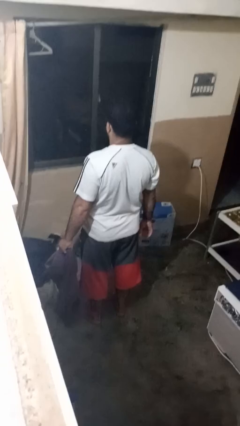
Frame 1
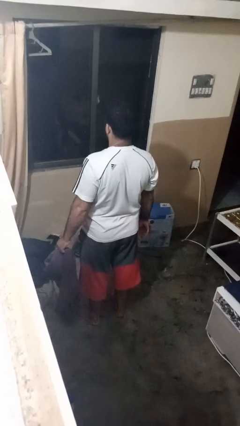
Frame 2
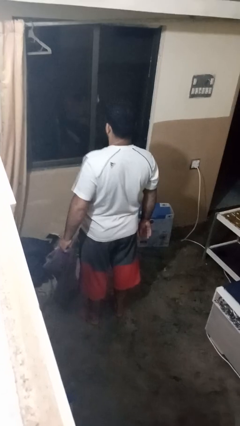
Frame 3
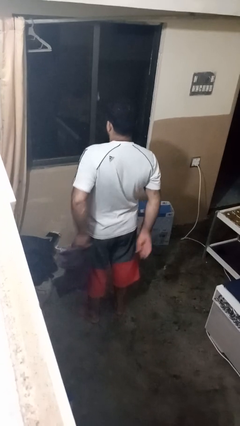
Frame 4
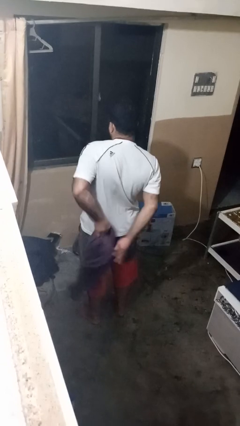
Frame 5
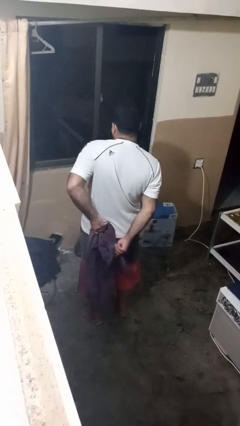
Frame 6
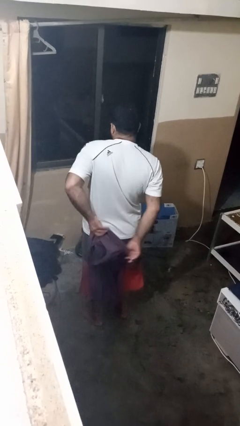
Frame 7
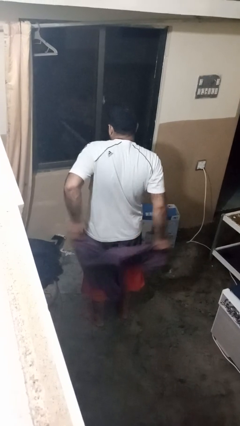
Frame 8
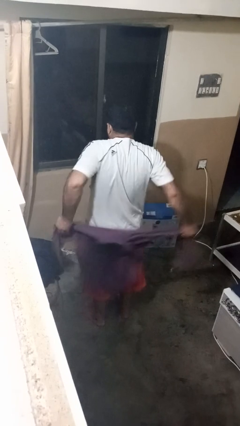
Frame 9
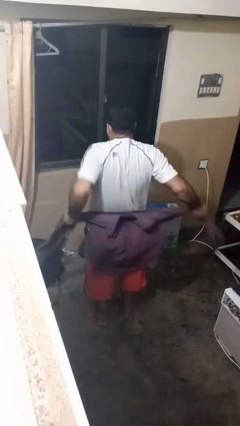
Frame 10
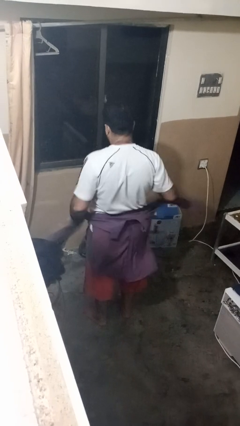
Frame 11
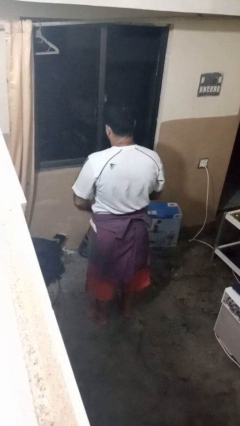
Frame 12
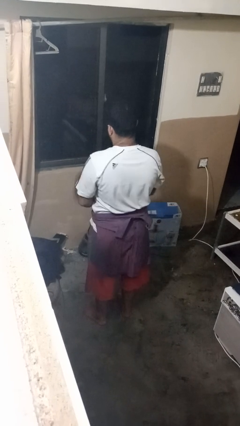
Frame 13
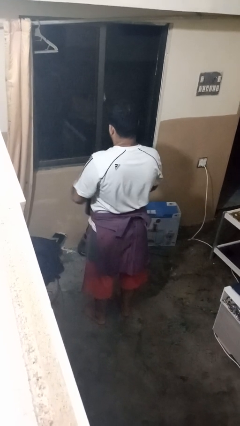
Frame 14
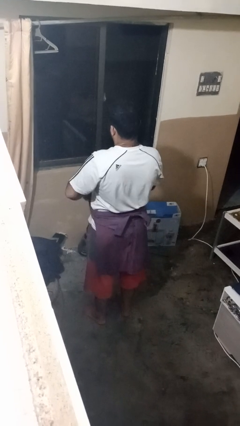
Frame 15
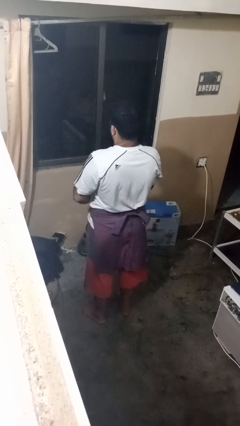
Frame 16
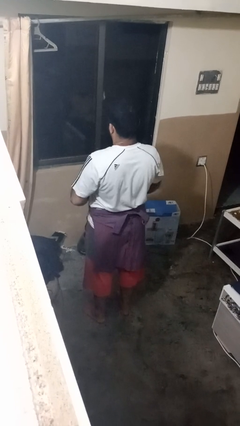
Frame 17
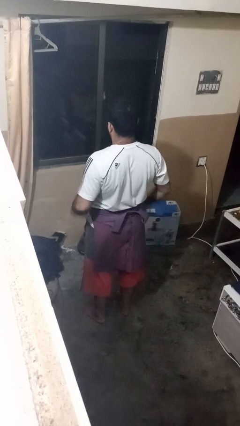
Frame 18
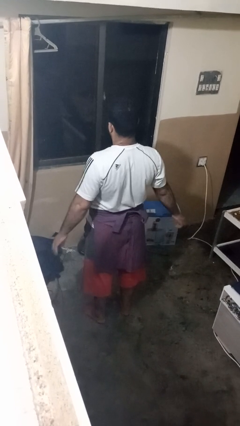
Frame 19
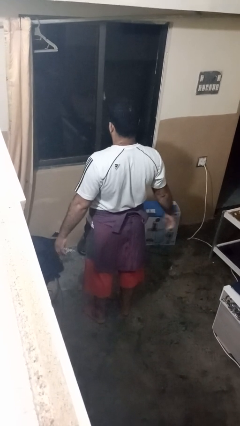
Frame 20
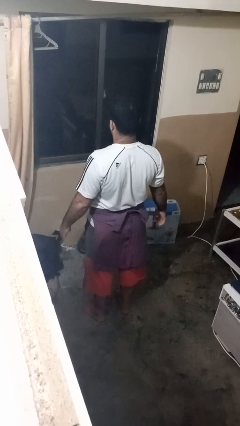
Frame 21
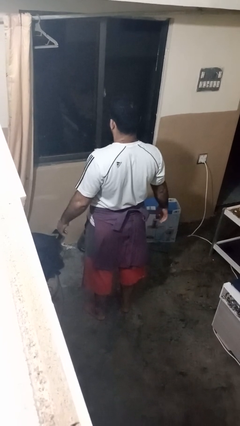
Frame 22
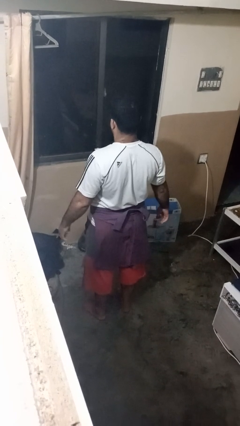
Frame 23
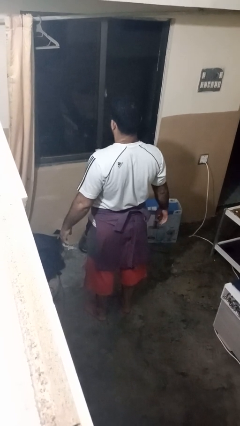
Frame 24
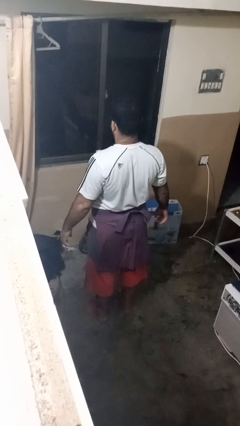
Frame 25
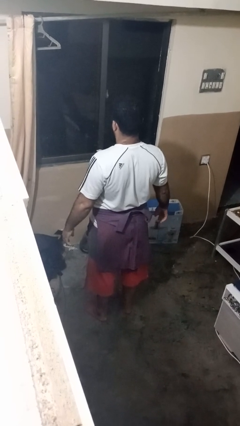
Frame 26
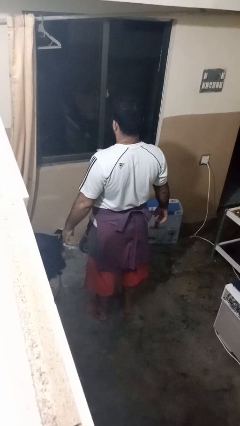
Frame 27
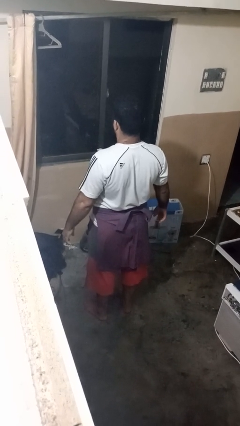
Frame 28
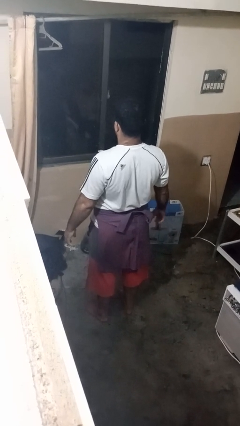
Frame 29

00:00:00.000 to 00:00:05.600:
person ties jacket around waist

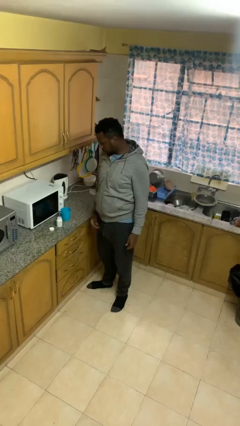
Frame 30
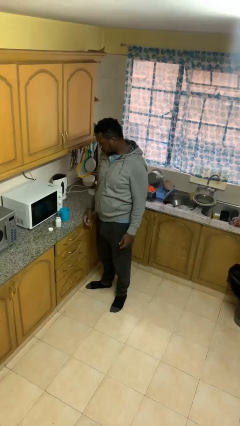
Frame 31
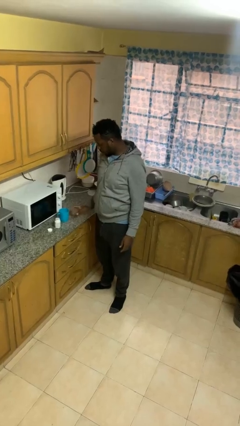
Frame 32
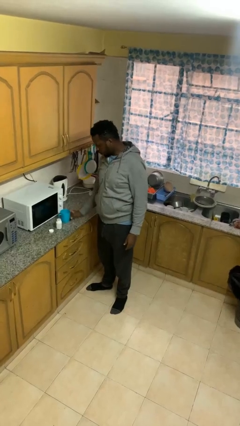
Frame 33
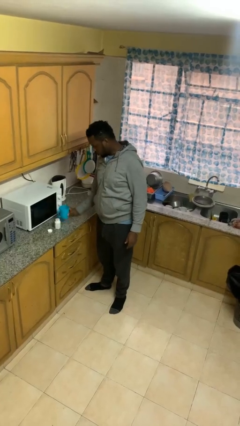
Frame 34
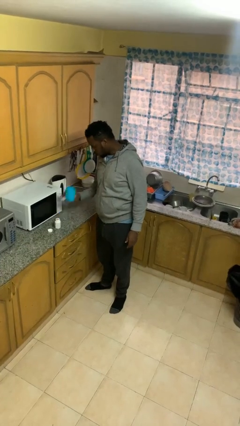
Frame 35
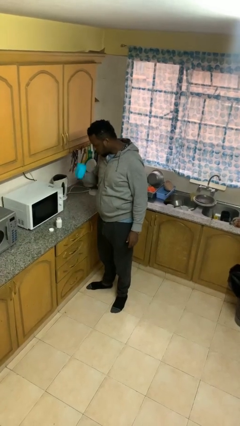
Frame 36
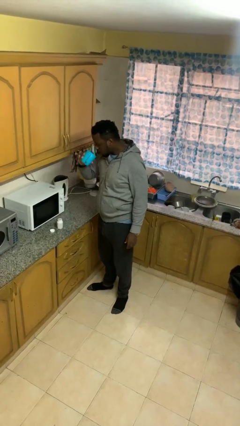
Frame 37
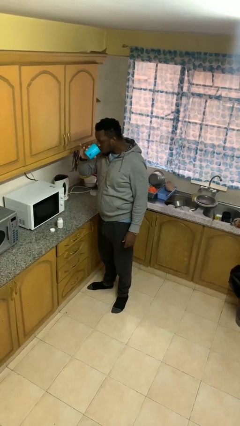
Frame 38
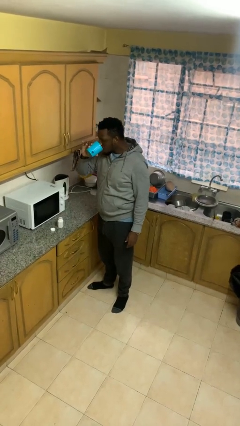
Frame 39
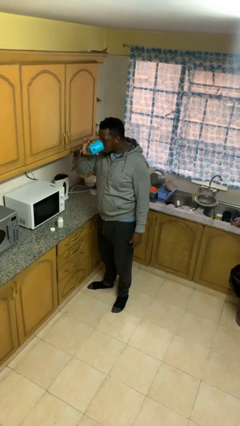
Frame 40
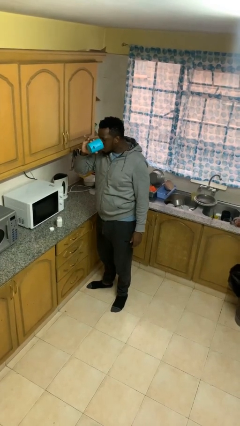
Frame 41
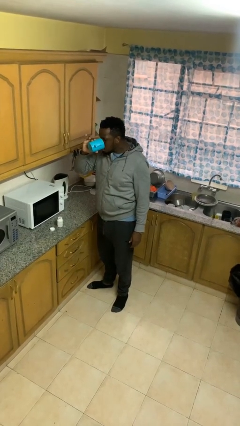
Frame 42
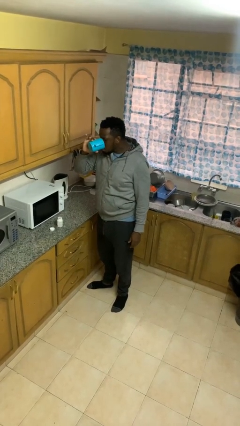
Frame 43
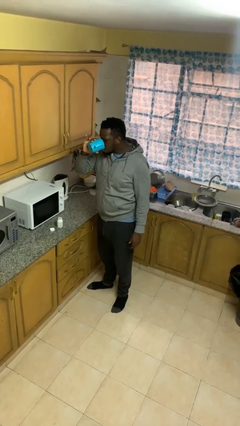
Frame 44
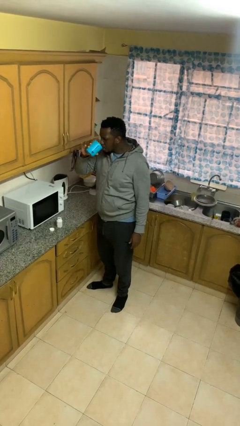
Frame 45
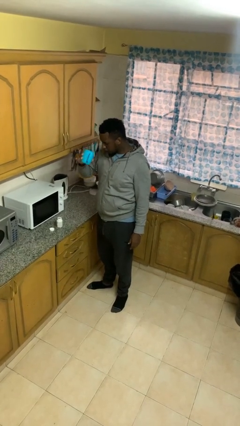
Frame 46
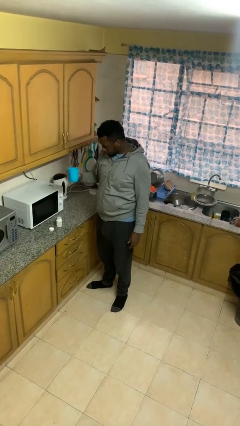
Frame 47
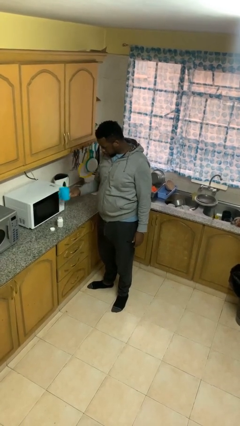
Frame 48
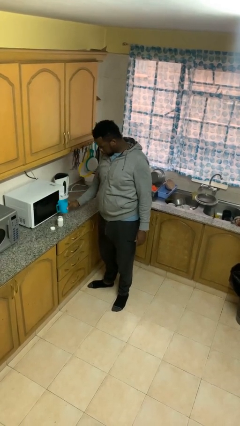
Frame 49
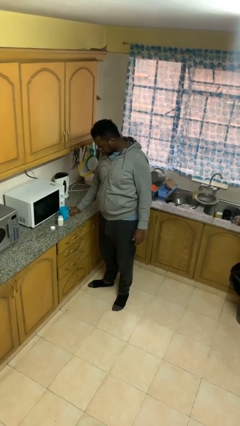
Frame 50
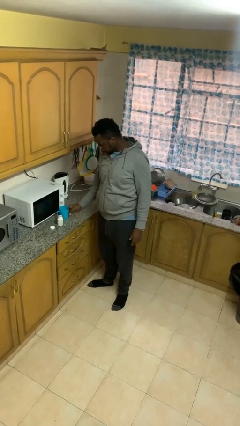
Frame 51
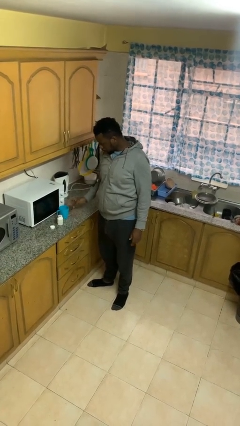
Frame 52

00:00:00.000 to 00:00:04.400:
person drinks from cup

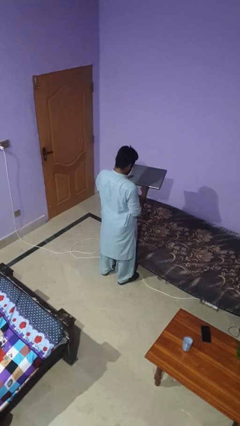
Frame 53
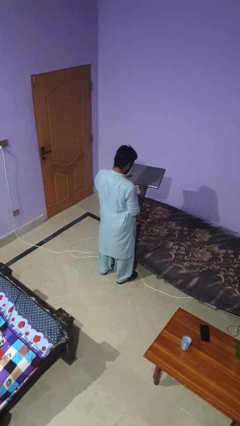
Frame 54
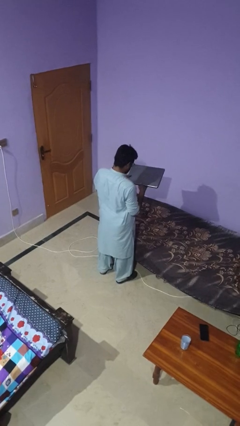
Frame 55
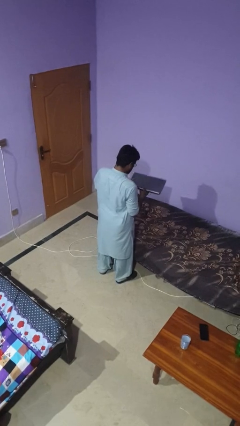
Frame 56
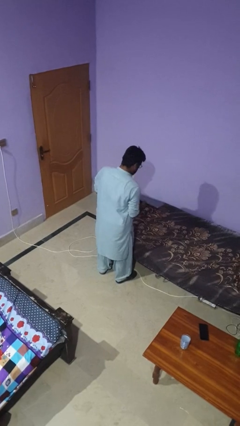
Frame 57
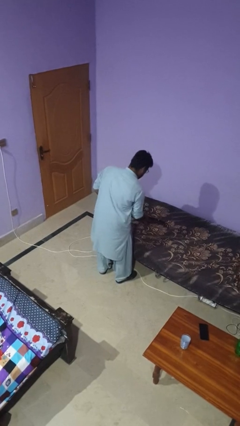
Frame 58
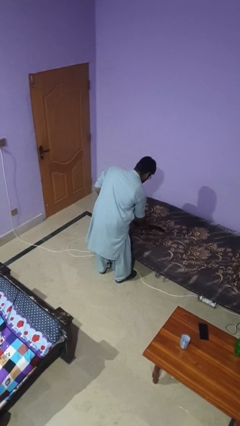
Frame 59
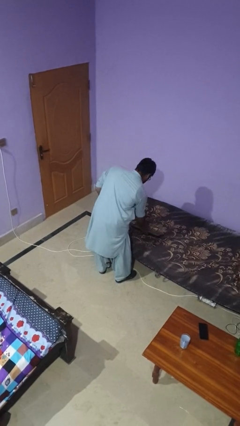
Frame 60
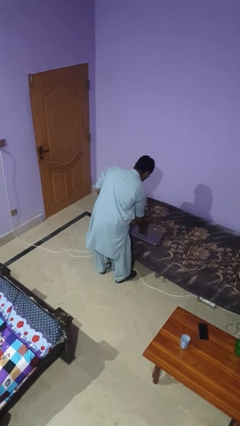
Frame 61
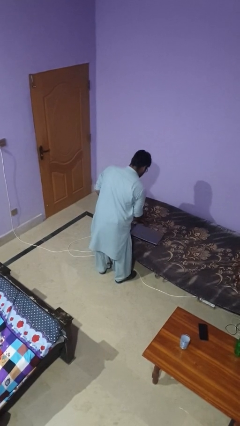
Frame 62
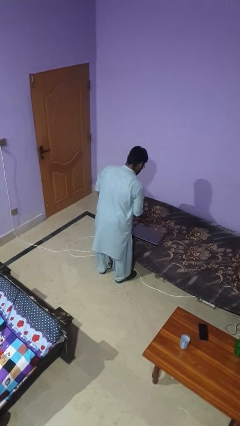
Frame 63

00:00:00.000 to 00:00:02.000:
person puts down object on bed

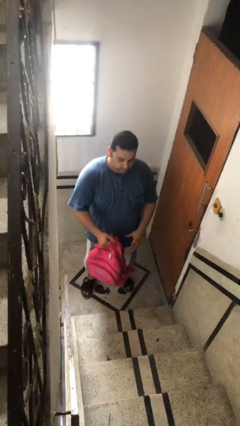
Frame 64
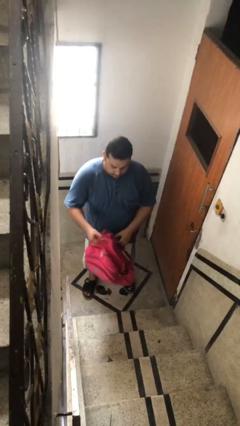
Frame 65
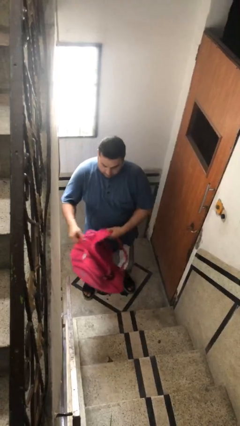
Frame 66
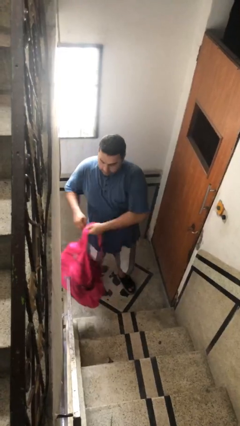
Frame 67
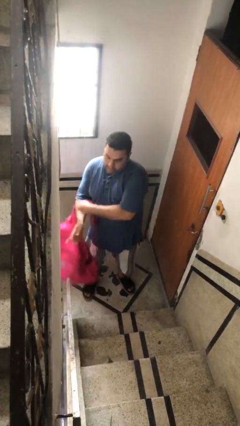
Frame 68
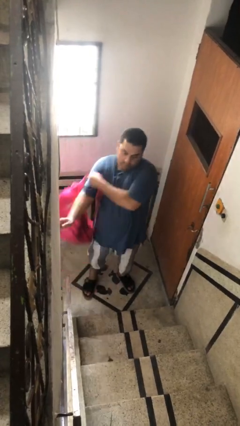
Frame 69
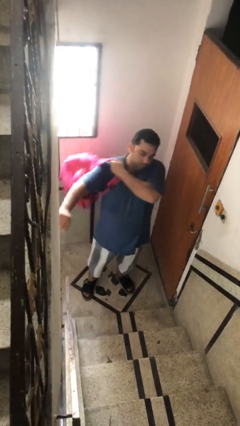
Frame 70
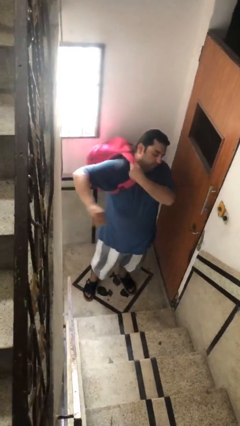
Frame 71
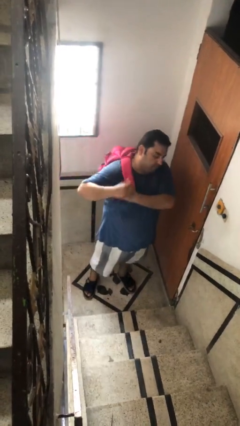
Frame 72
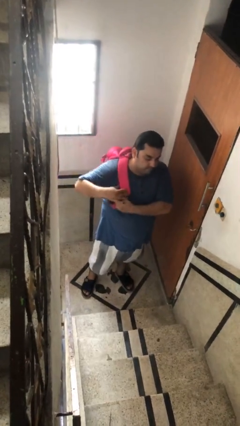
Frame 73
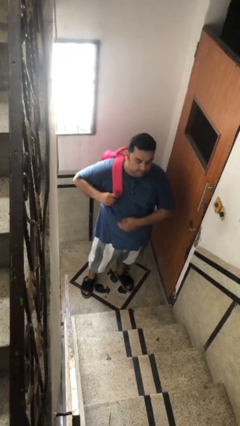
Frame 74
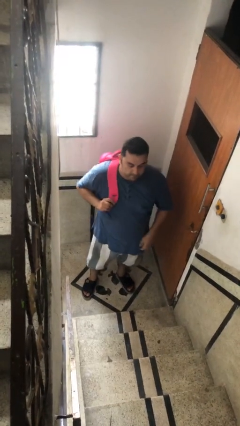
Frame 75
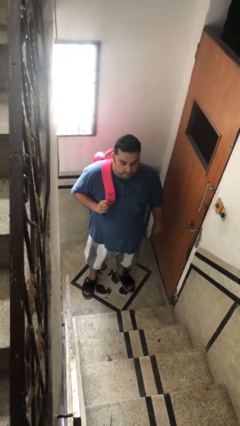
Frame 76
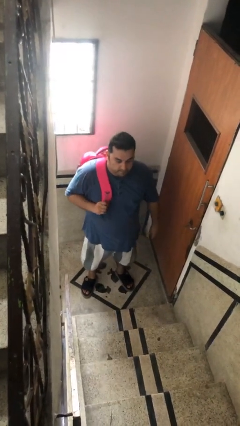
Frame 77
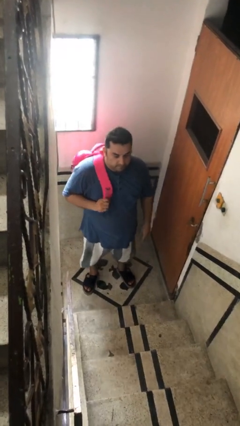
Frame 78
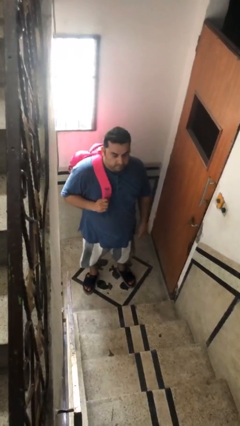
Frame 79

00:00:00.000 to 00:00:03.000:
person puts on backpack

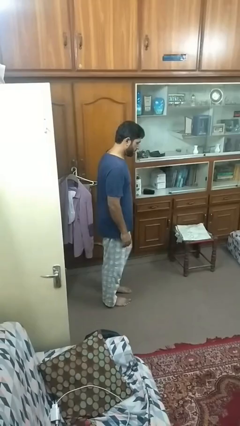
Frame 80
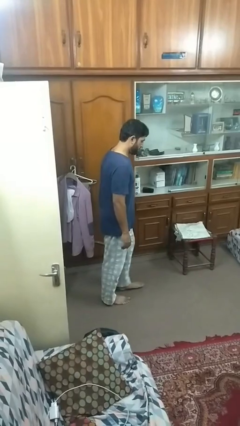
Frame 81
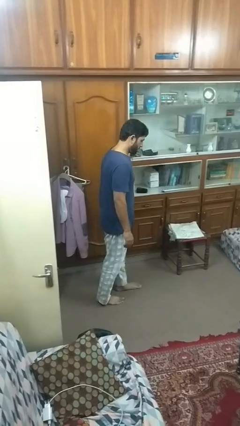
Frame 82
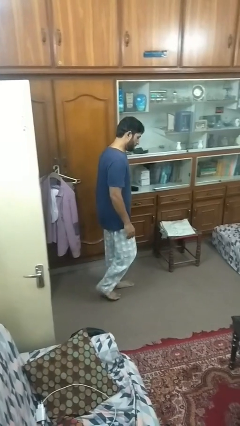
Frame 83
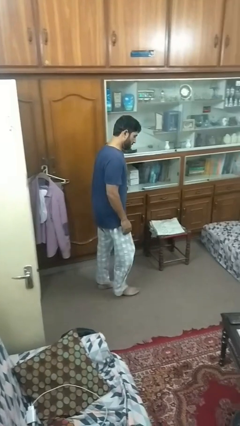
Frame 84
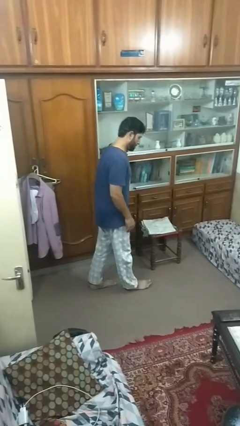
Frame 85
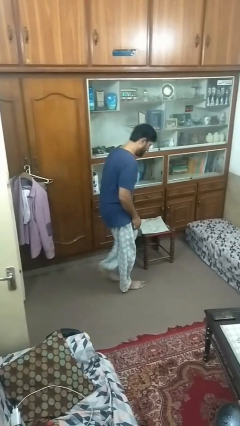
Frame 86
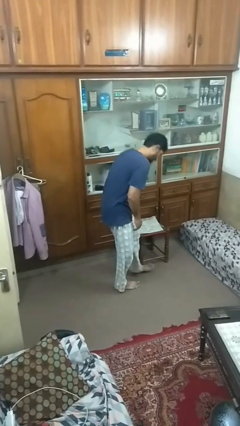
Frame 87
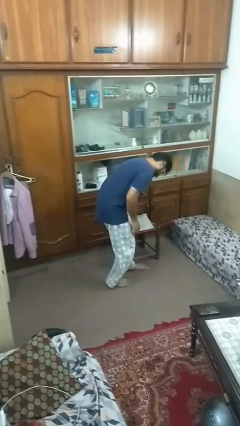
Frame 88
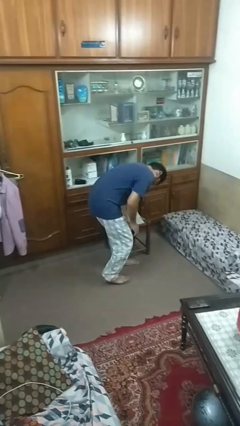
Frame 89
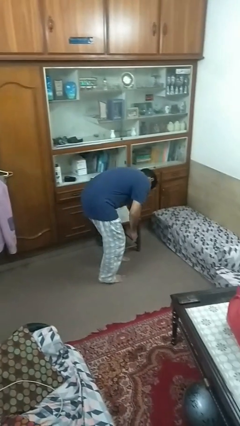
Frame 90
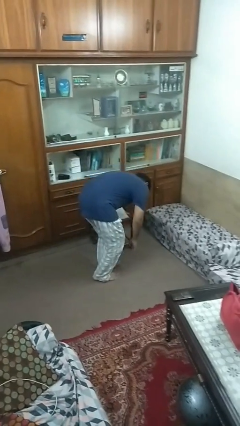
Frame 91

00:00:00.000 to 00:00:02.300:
person trips on object on floor

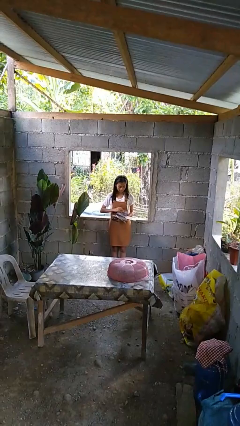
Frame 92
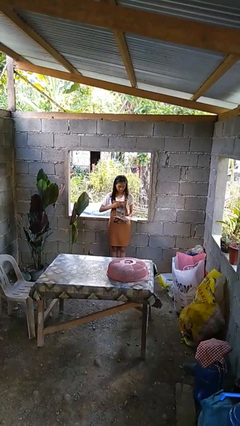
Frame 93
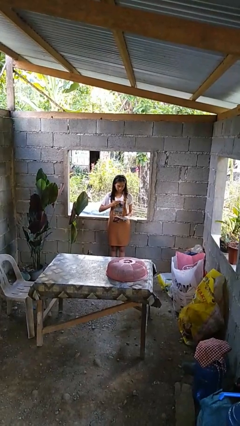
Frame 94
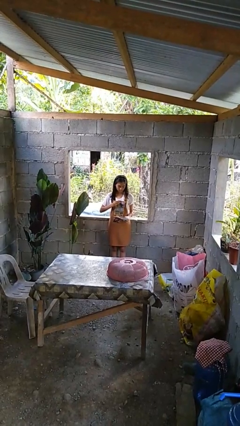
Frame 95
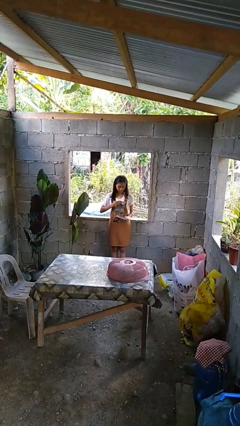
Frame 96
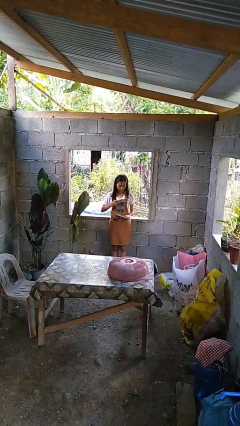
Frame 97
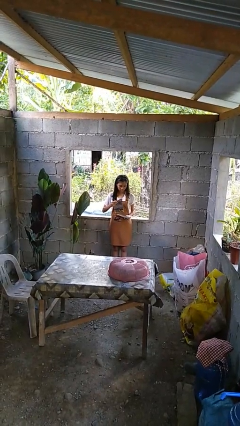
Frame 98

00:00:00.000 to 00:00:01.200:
person tears paper
